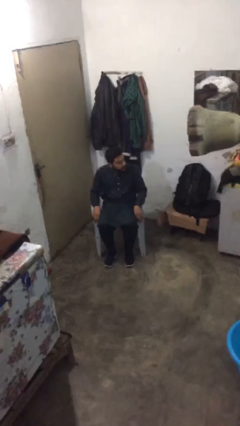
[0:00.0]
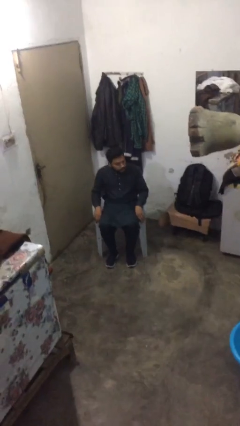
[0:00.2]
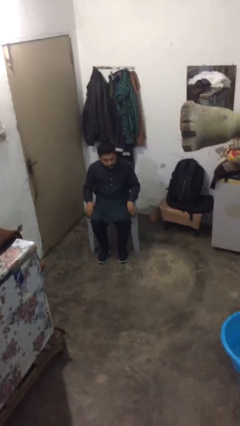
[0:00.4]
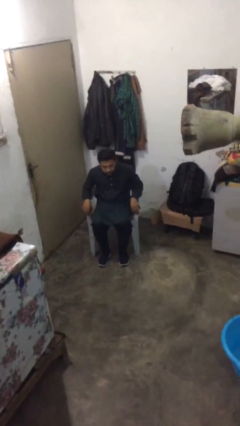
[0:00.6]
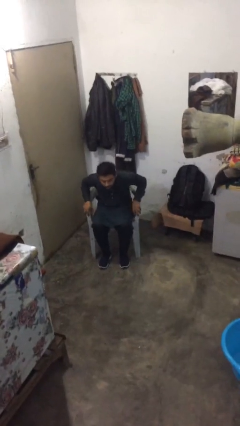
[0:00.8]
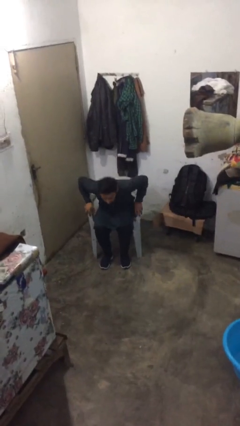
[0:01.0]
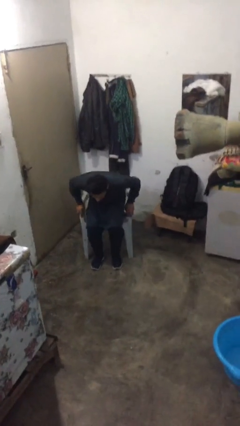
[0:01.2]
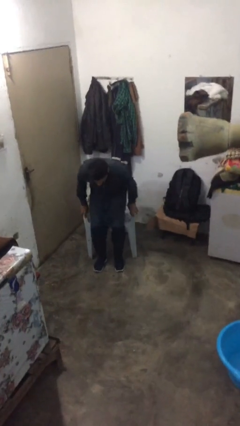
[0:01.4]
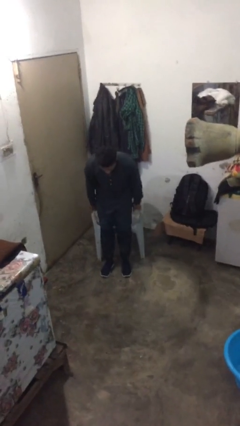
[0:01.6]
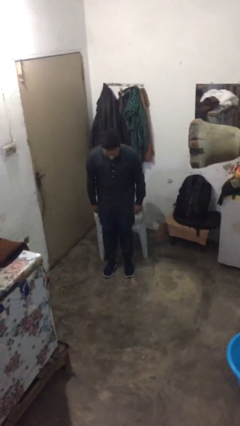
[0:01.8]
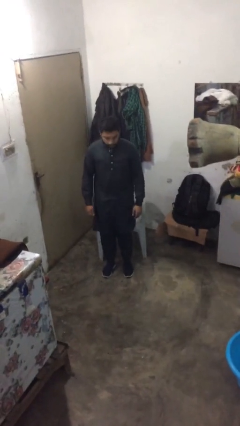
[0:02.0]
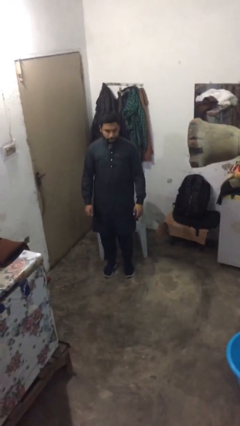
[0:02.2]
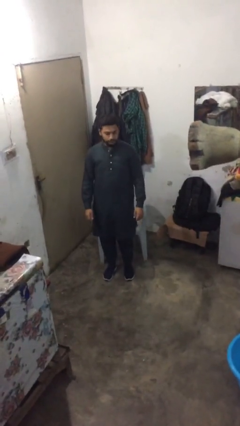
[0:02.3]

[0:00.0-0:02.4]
person stands up

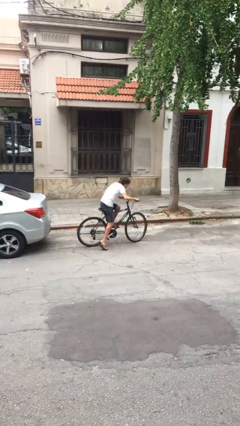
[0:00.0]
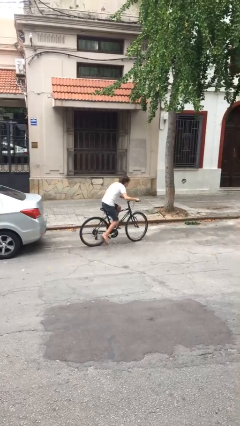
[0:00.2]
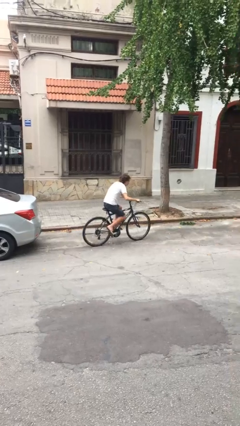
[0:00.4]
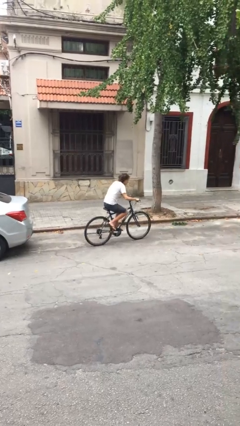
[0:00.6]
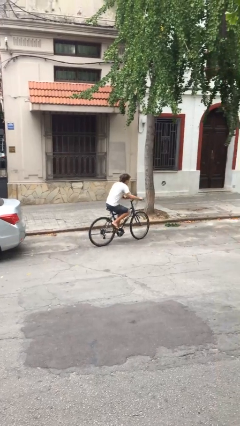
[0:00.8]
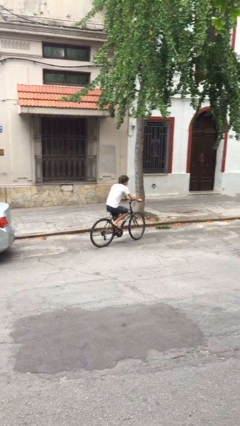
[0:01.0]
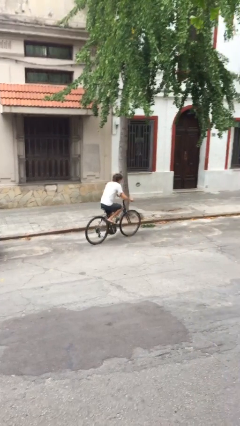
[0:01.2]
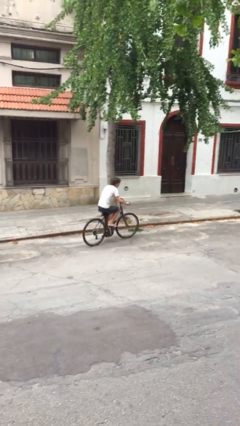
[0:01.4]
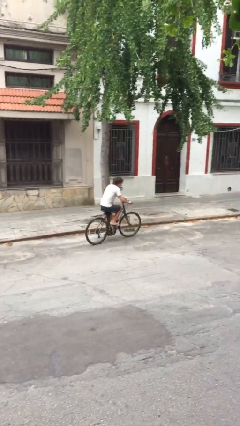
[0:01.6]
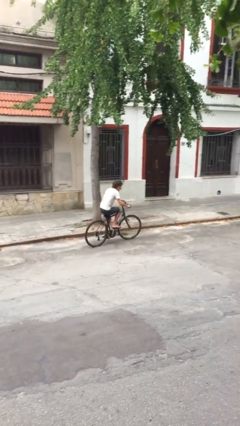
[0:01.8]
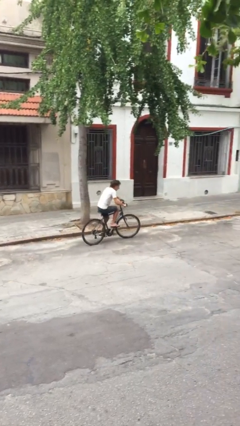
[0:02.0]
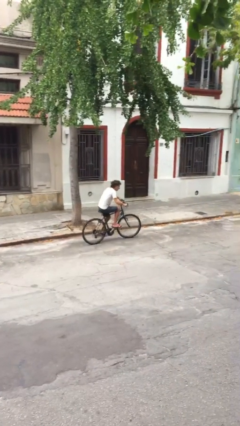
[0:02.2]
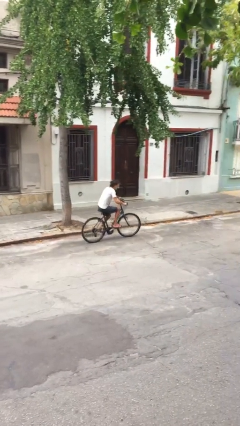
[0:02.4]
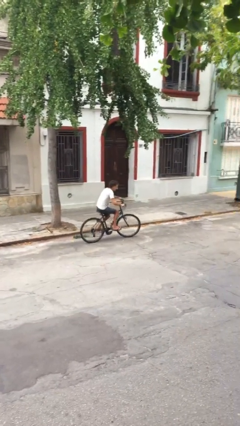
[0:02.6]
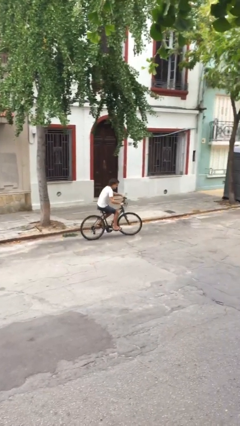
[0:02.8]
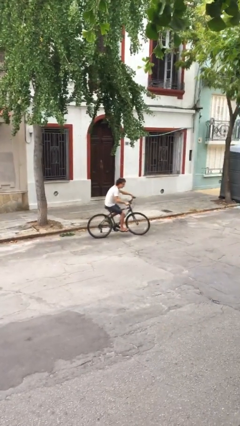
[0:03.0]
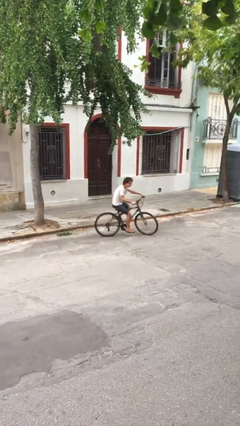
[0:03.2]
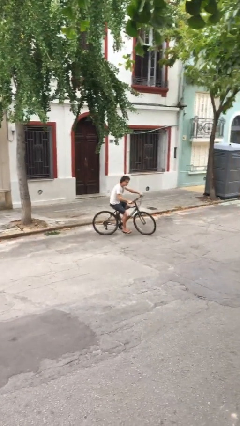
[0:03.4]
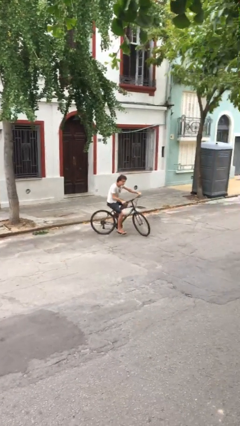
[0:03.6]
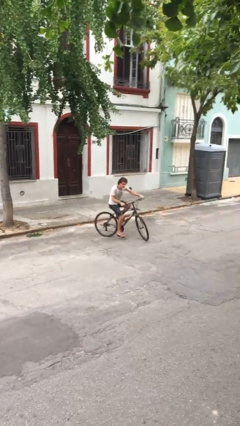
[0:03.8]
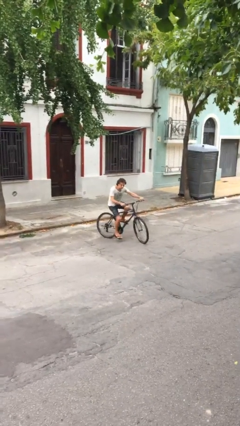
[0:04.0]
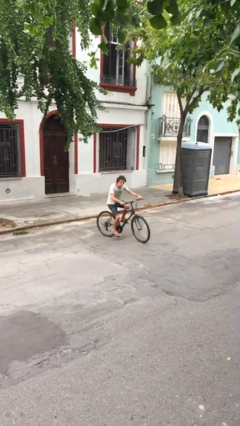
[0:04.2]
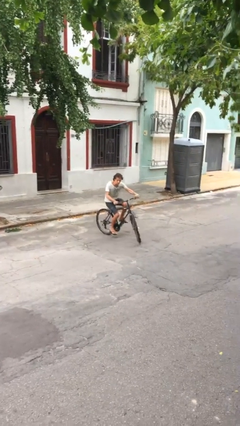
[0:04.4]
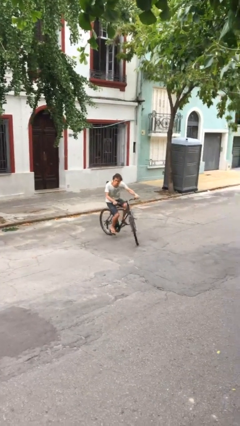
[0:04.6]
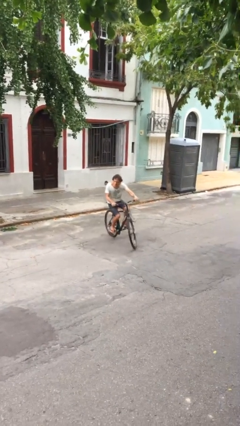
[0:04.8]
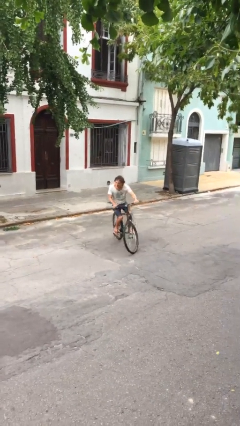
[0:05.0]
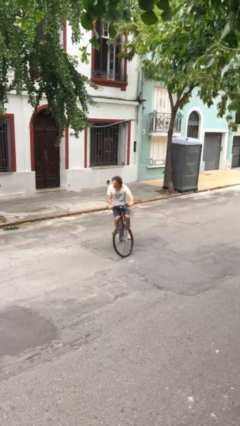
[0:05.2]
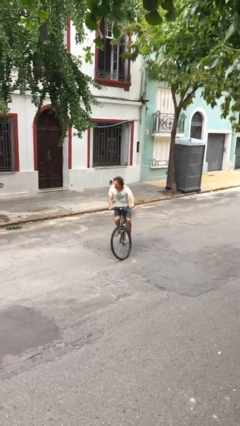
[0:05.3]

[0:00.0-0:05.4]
person rides bicycle

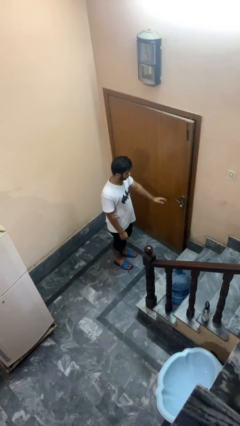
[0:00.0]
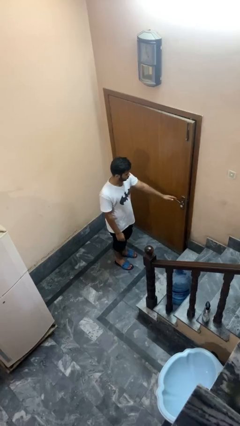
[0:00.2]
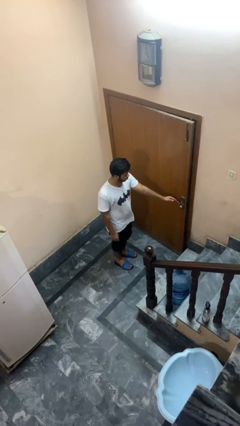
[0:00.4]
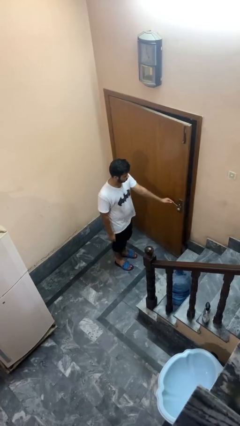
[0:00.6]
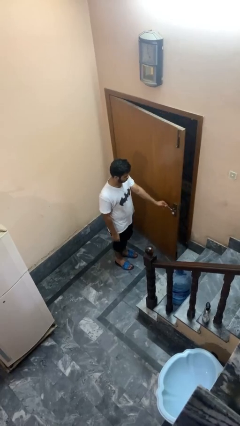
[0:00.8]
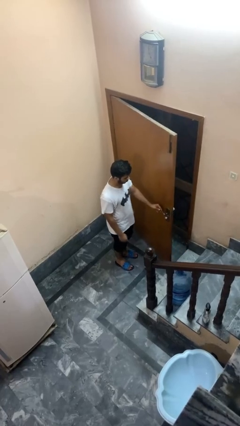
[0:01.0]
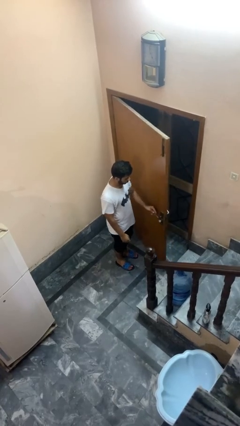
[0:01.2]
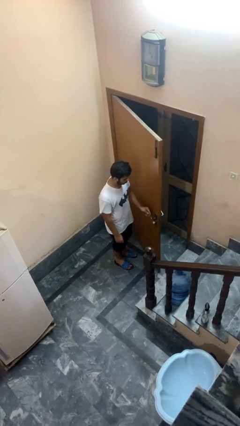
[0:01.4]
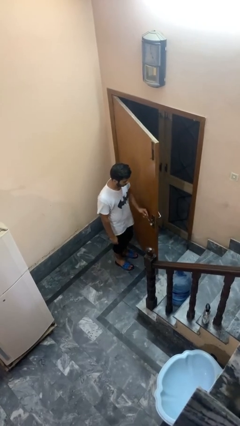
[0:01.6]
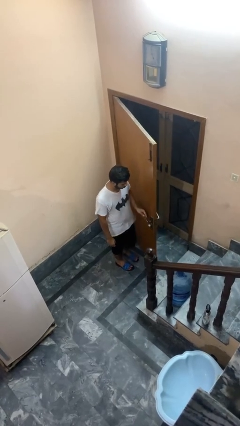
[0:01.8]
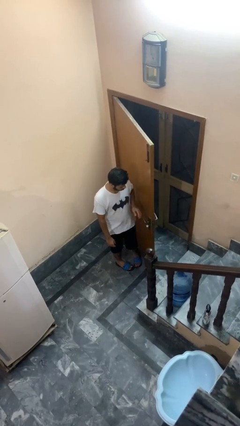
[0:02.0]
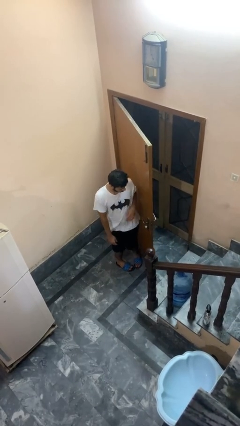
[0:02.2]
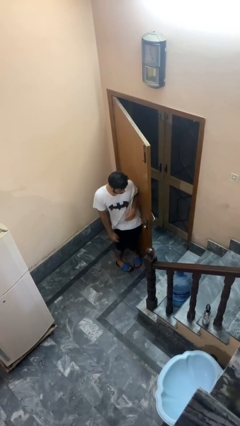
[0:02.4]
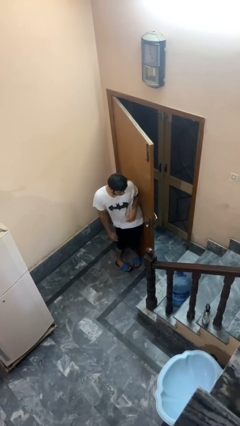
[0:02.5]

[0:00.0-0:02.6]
person opens facility door

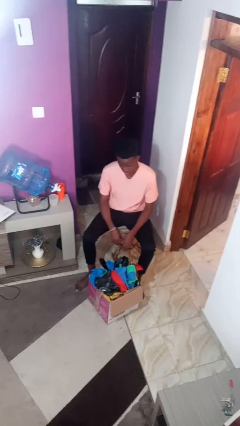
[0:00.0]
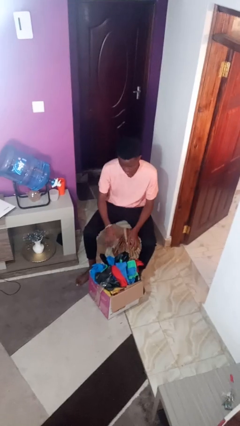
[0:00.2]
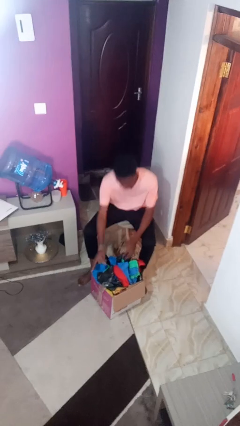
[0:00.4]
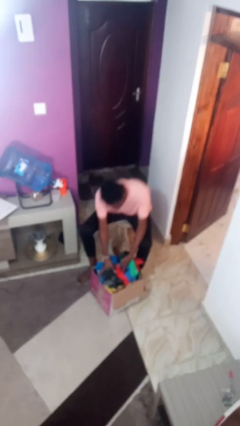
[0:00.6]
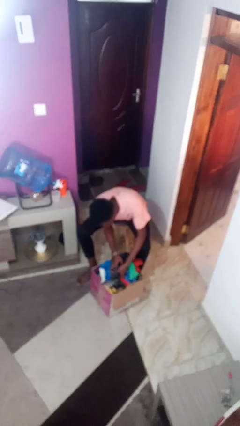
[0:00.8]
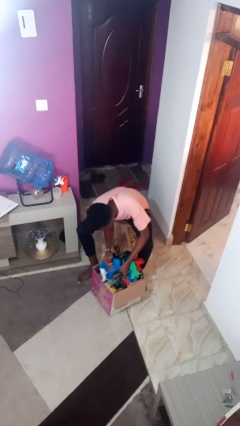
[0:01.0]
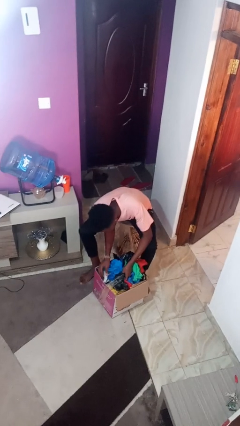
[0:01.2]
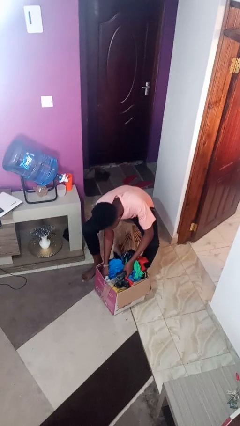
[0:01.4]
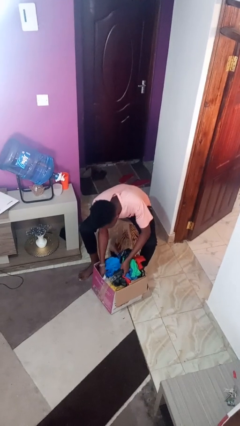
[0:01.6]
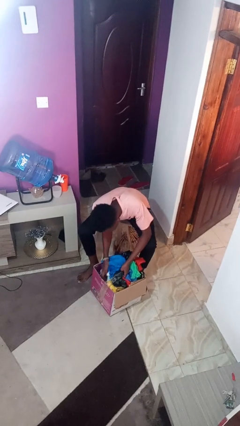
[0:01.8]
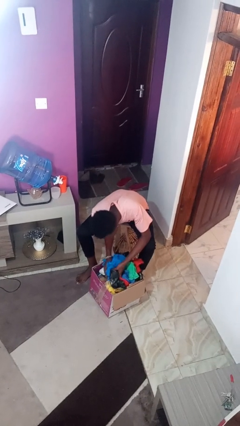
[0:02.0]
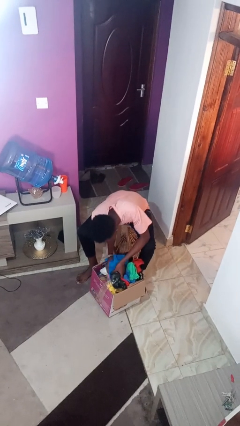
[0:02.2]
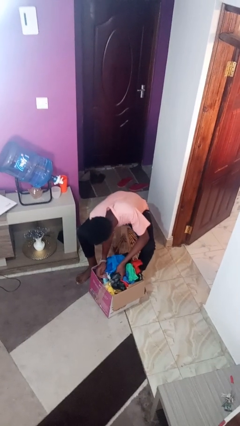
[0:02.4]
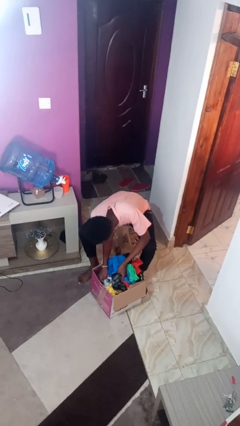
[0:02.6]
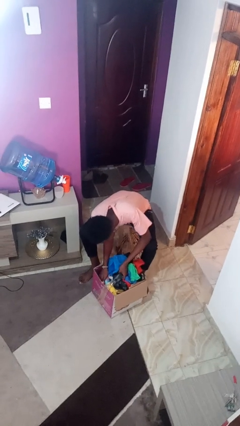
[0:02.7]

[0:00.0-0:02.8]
person searches in box

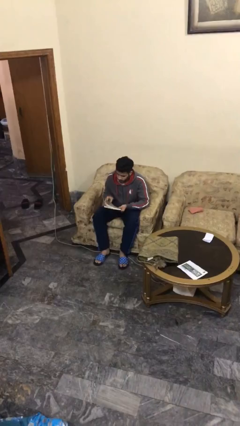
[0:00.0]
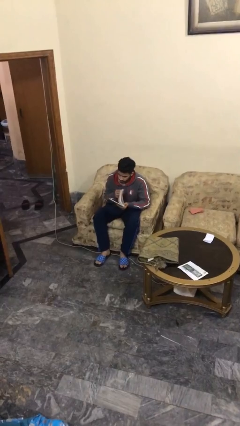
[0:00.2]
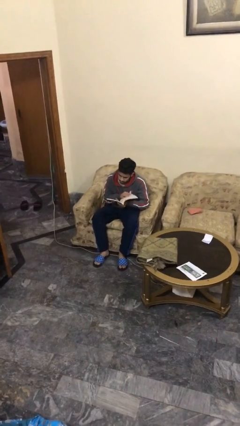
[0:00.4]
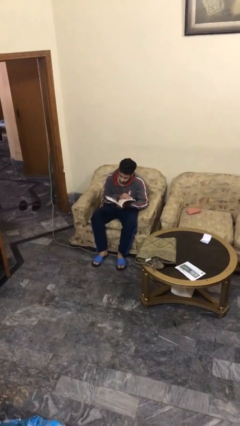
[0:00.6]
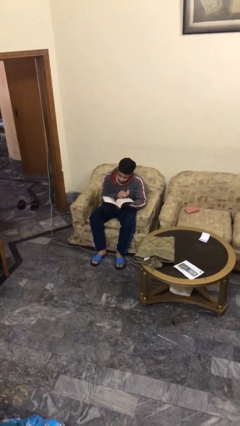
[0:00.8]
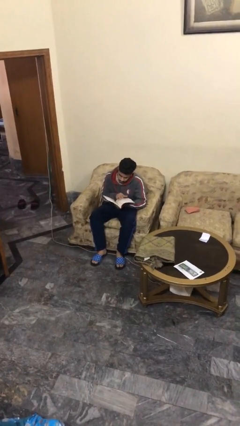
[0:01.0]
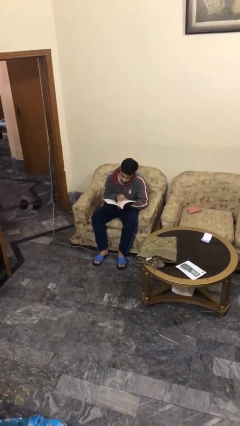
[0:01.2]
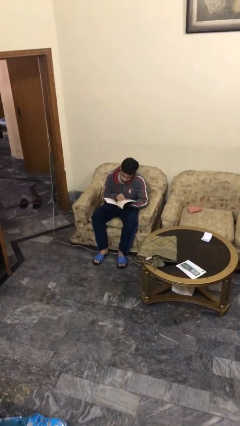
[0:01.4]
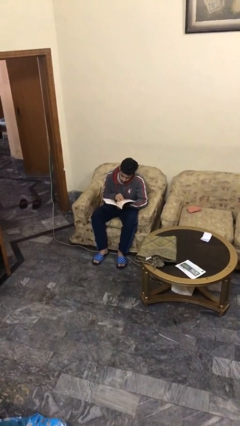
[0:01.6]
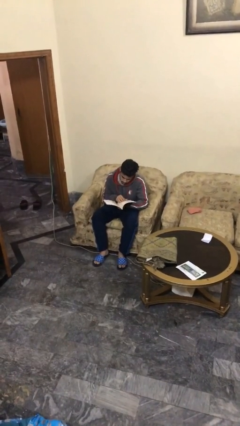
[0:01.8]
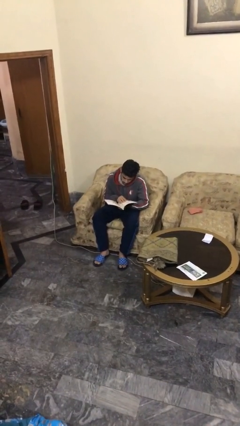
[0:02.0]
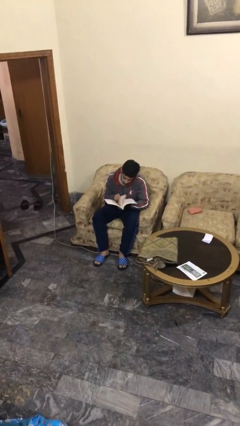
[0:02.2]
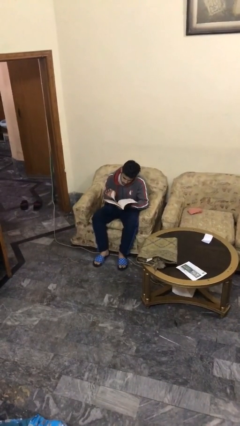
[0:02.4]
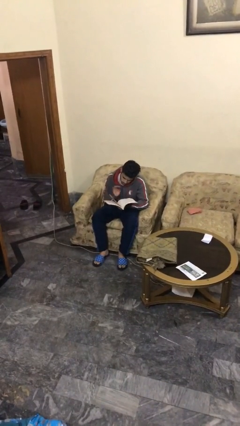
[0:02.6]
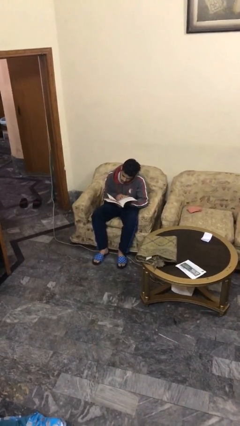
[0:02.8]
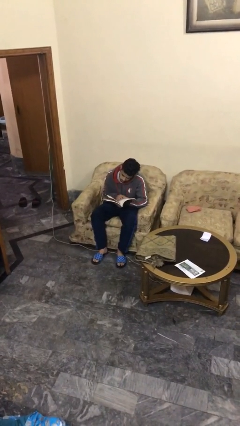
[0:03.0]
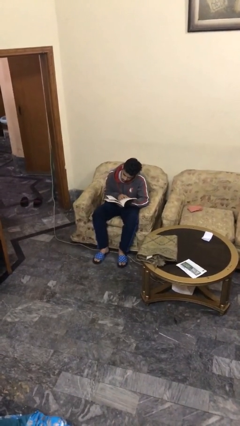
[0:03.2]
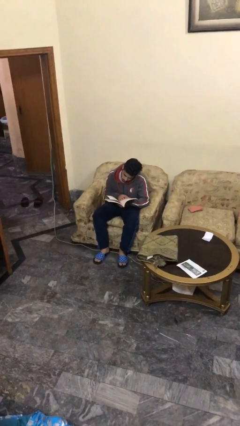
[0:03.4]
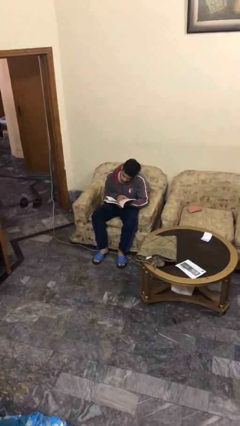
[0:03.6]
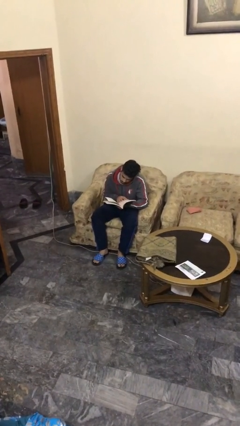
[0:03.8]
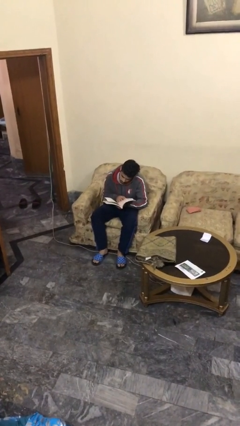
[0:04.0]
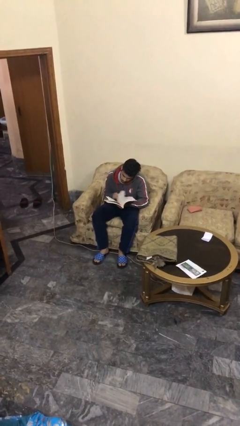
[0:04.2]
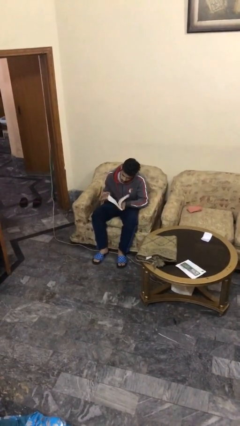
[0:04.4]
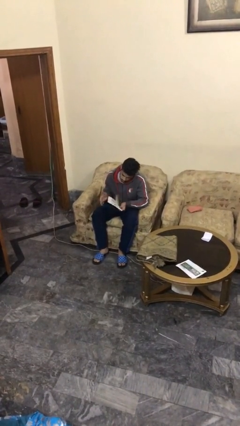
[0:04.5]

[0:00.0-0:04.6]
person reads document
